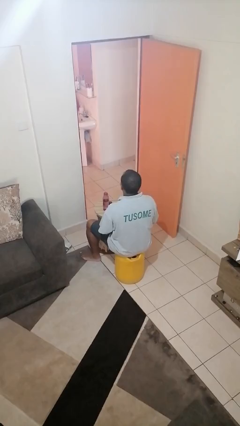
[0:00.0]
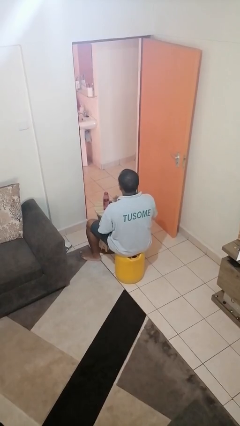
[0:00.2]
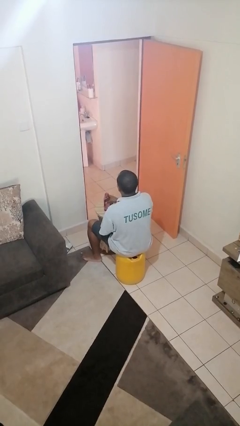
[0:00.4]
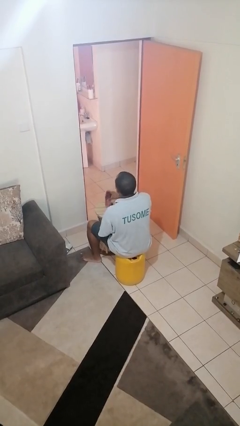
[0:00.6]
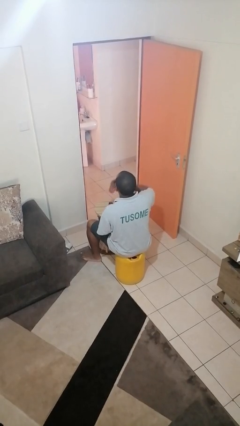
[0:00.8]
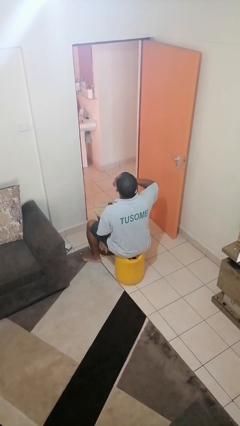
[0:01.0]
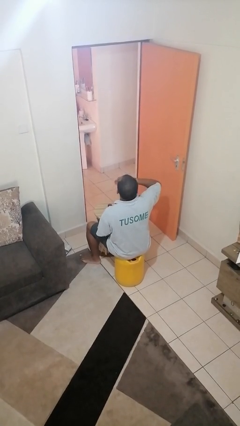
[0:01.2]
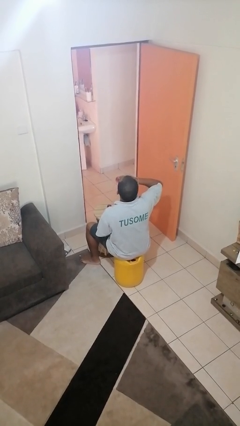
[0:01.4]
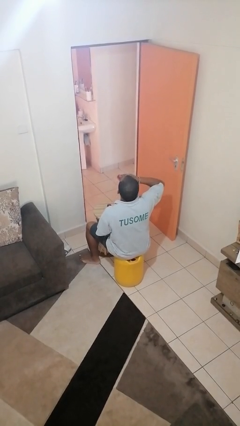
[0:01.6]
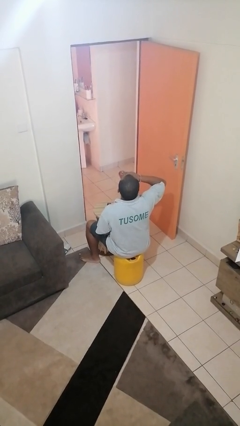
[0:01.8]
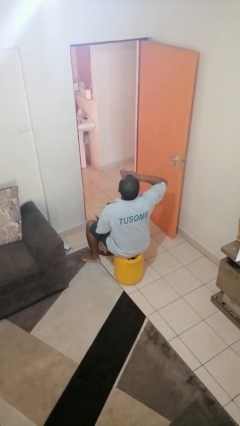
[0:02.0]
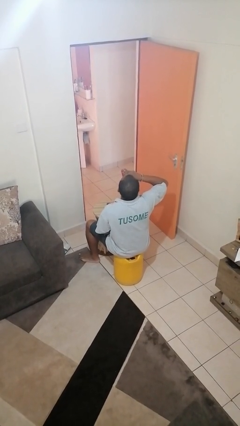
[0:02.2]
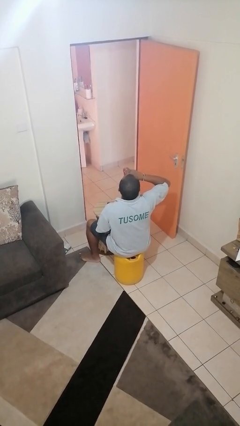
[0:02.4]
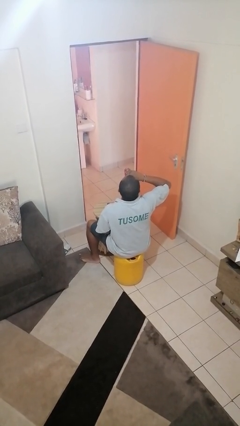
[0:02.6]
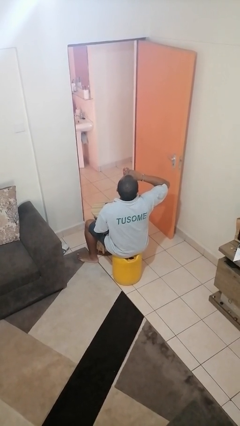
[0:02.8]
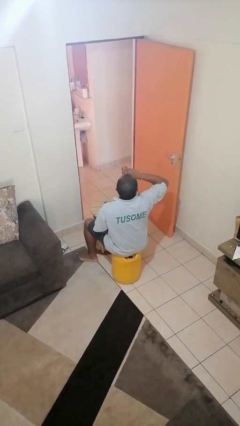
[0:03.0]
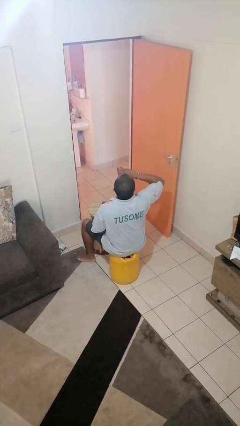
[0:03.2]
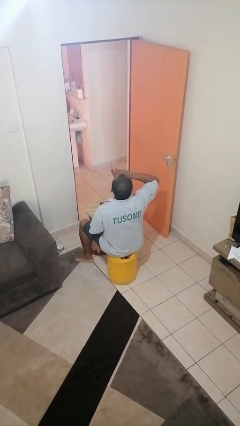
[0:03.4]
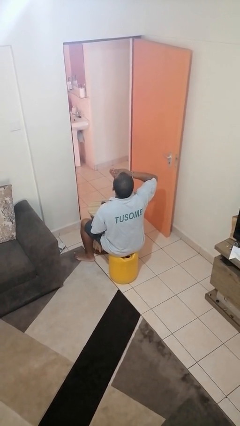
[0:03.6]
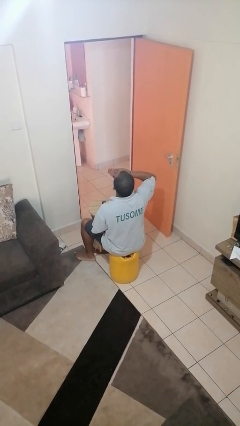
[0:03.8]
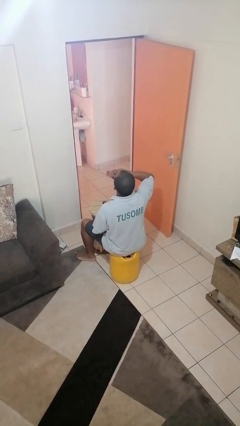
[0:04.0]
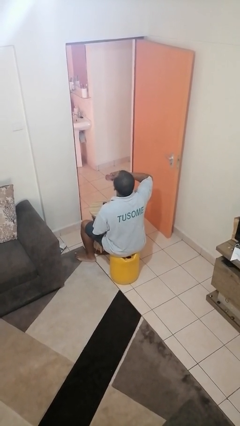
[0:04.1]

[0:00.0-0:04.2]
person drinks from bottle

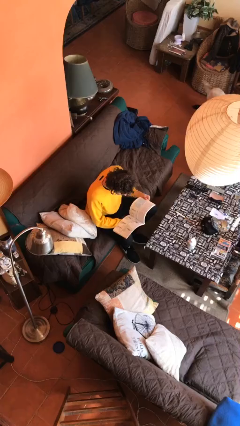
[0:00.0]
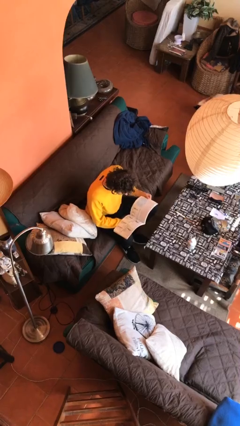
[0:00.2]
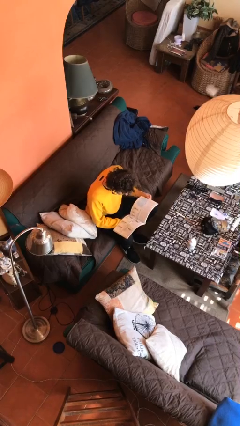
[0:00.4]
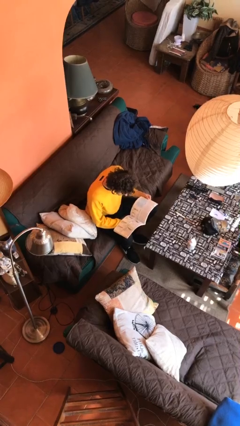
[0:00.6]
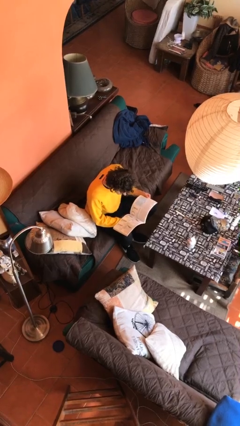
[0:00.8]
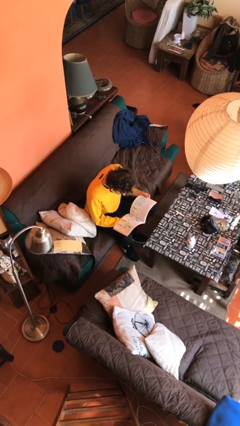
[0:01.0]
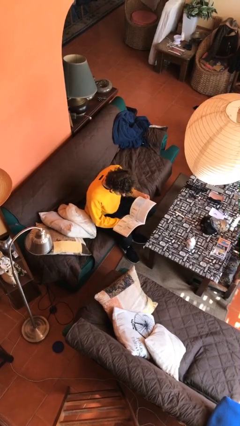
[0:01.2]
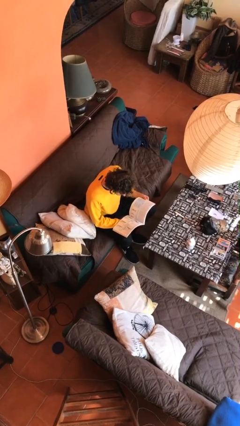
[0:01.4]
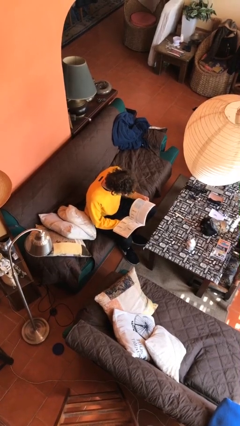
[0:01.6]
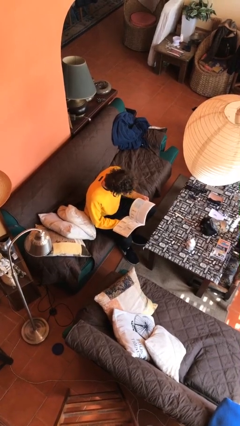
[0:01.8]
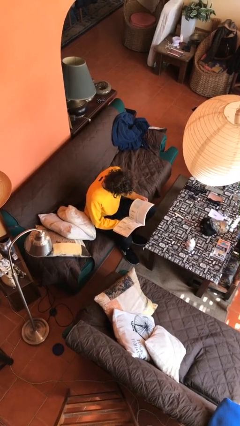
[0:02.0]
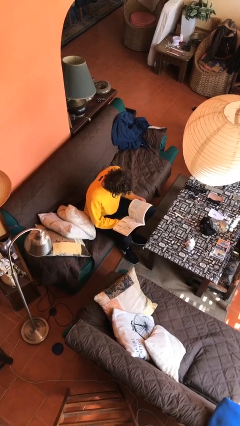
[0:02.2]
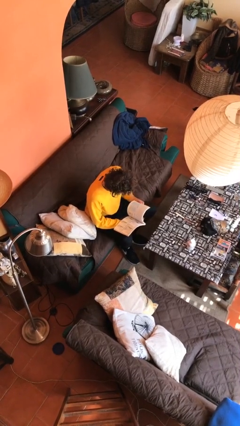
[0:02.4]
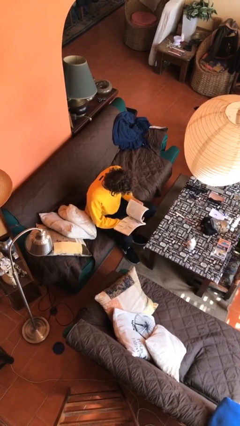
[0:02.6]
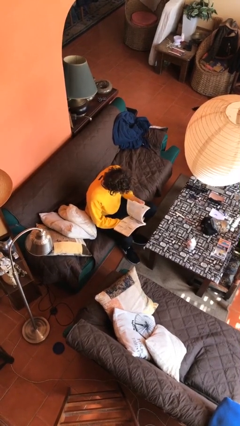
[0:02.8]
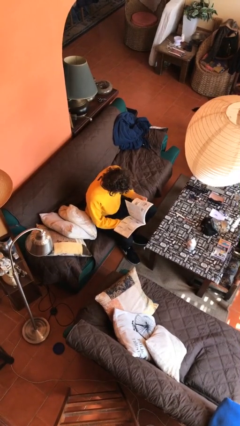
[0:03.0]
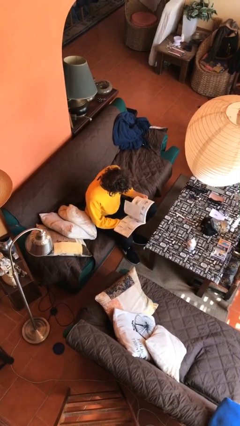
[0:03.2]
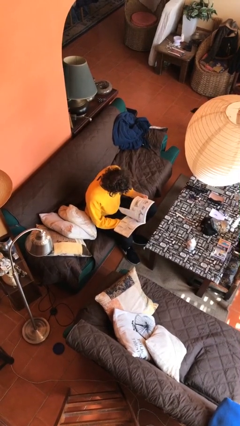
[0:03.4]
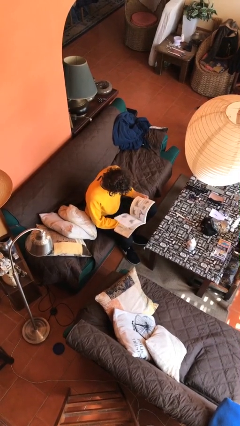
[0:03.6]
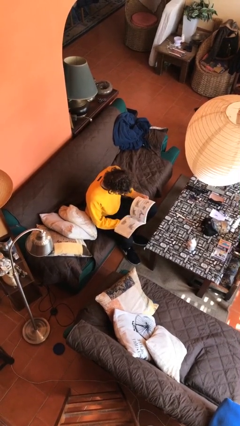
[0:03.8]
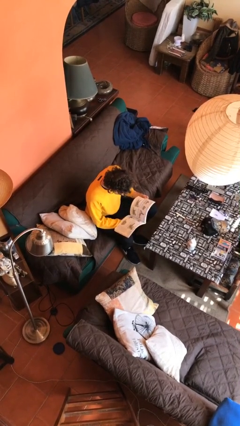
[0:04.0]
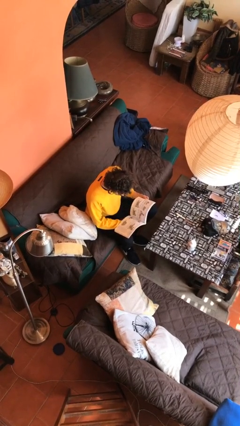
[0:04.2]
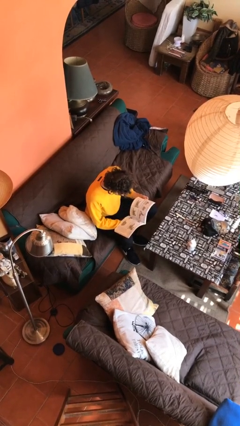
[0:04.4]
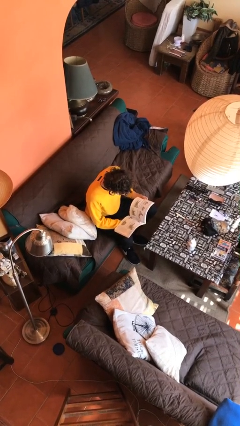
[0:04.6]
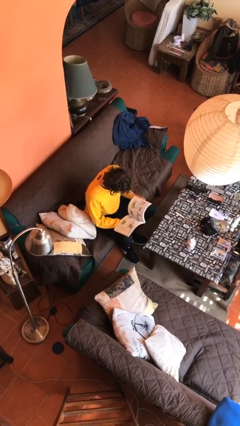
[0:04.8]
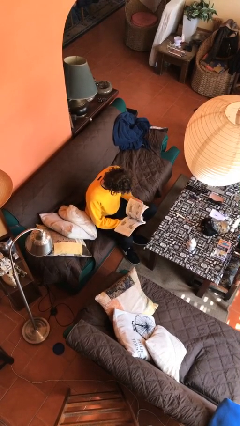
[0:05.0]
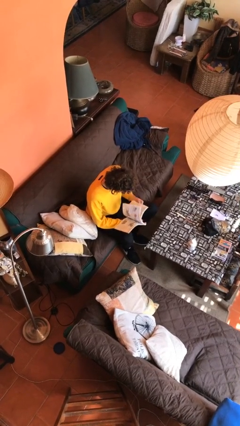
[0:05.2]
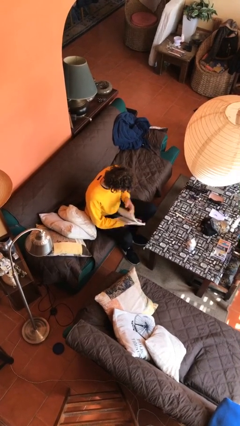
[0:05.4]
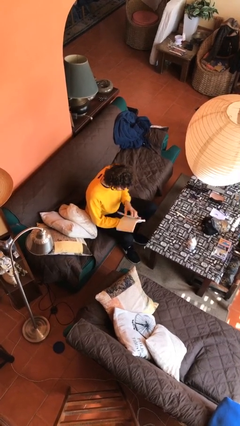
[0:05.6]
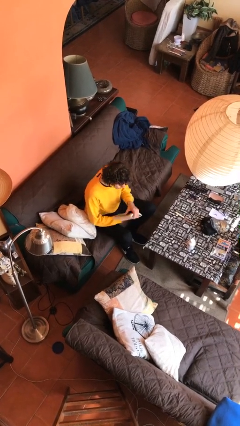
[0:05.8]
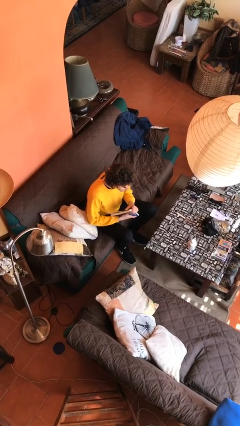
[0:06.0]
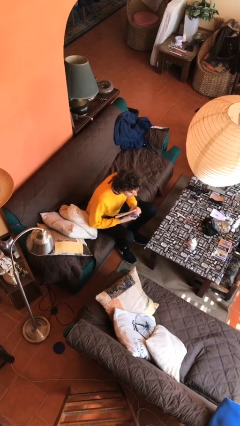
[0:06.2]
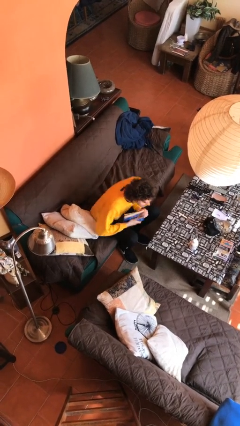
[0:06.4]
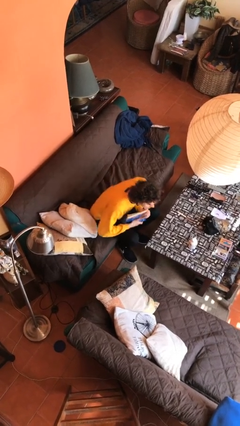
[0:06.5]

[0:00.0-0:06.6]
person reads document

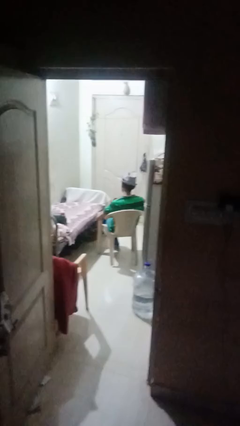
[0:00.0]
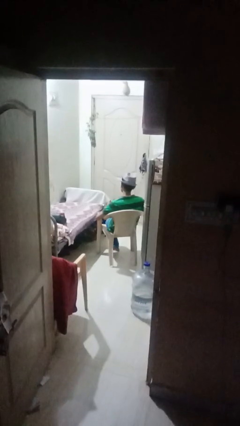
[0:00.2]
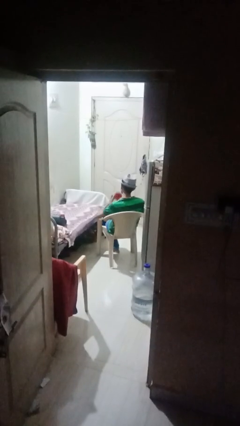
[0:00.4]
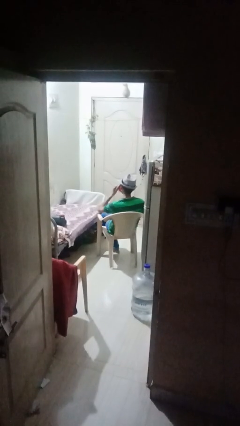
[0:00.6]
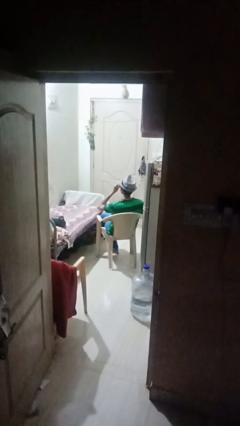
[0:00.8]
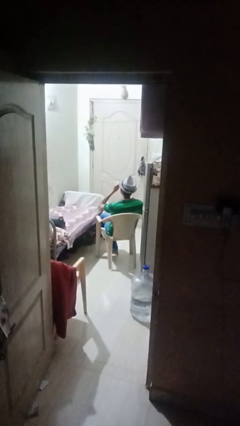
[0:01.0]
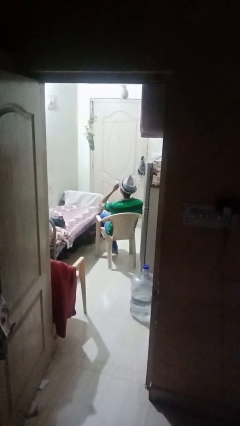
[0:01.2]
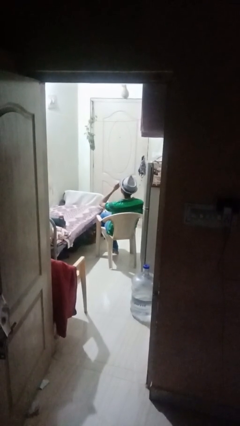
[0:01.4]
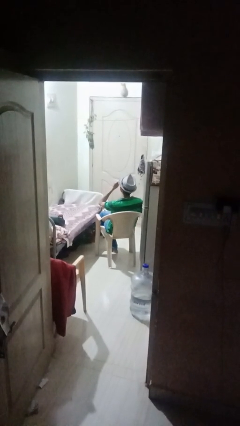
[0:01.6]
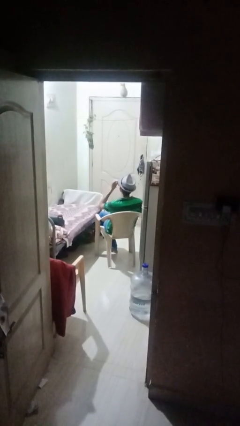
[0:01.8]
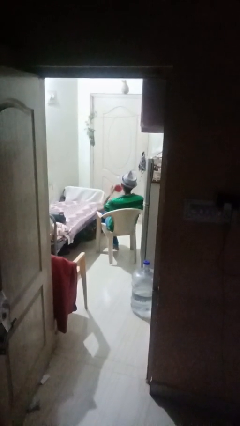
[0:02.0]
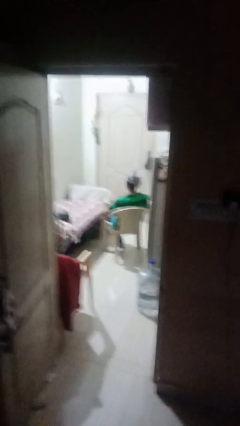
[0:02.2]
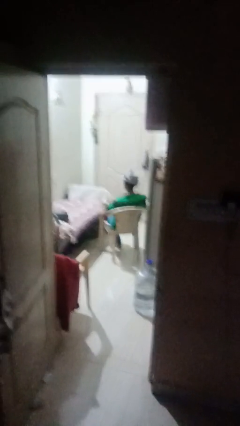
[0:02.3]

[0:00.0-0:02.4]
person drinks from mug

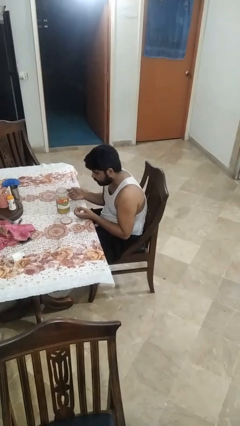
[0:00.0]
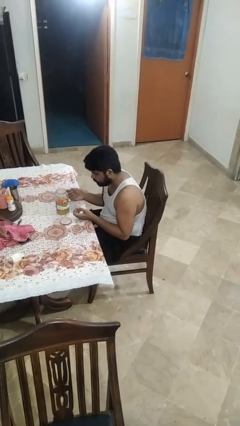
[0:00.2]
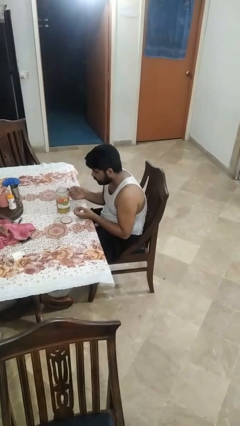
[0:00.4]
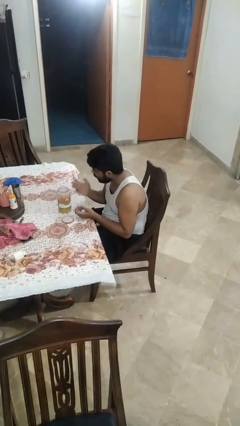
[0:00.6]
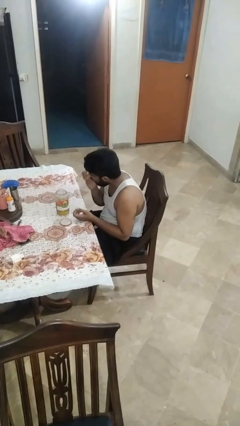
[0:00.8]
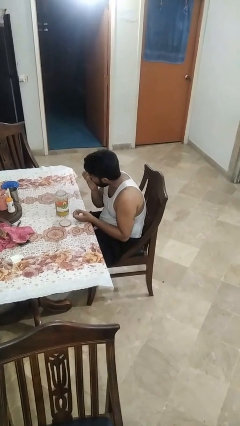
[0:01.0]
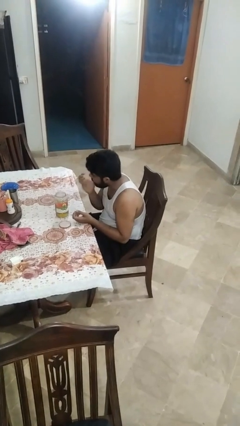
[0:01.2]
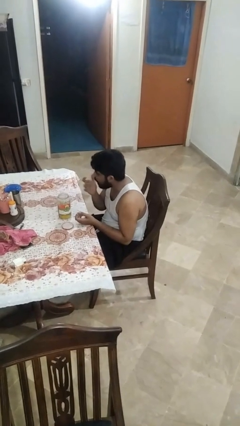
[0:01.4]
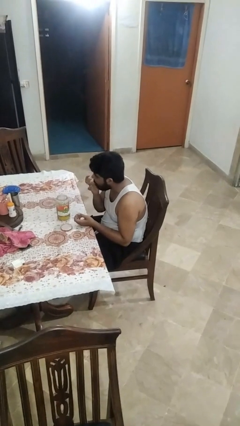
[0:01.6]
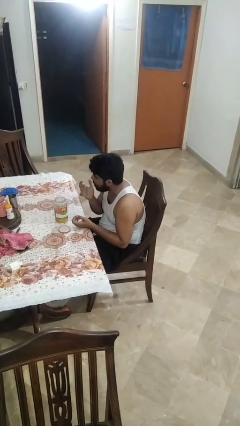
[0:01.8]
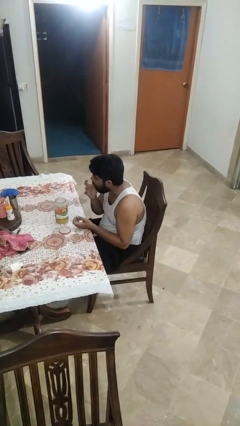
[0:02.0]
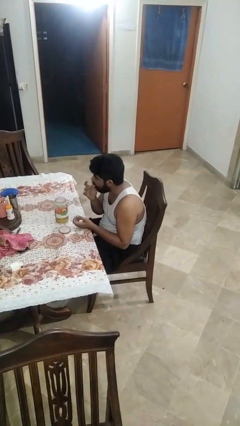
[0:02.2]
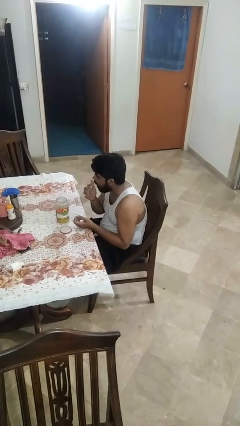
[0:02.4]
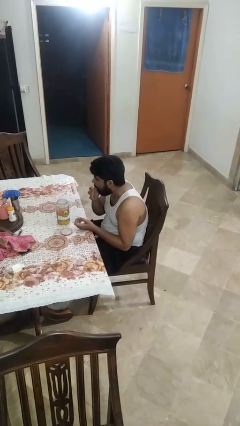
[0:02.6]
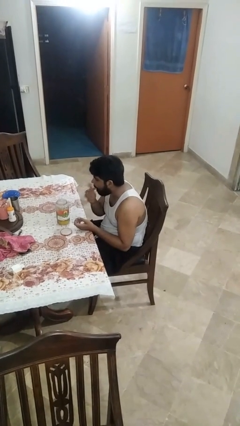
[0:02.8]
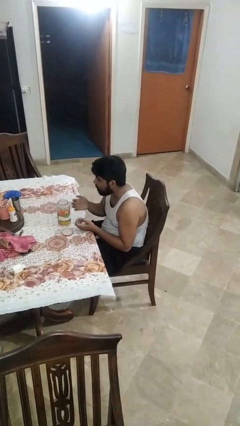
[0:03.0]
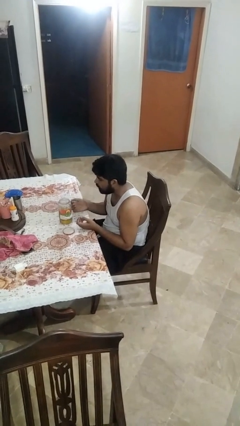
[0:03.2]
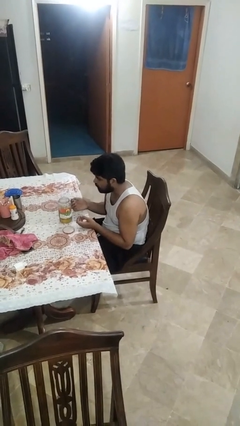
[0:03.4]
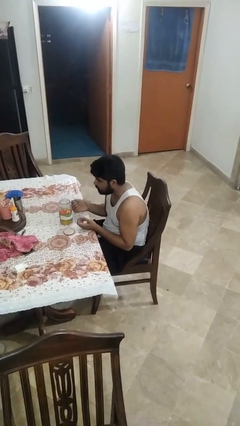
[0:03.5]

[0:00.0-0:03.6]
person licks fingers

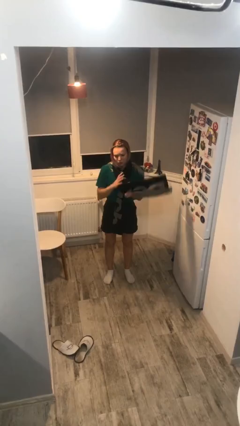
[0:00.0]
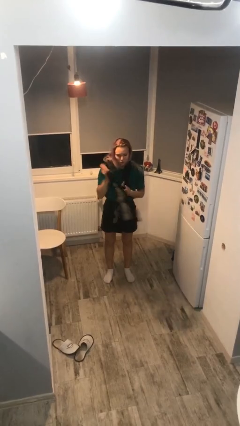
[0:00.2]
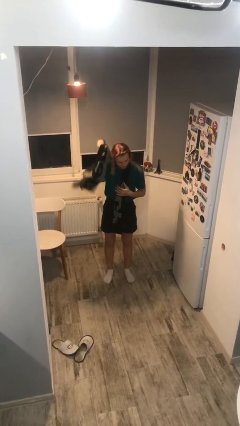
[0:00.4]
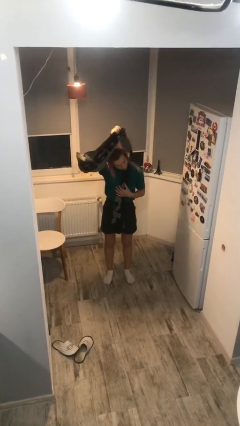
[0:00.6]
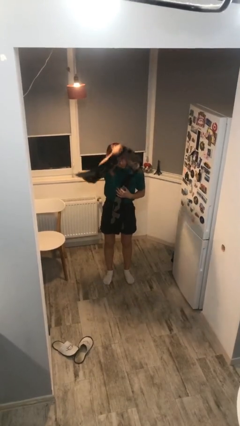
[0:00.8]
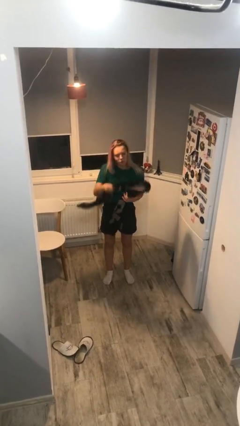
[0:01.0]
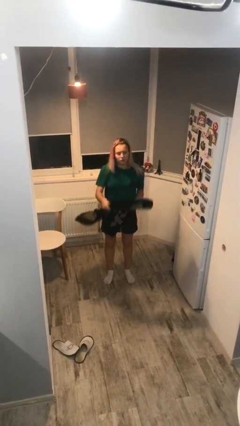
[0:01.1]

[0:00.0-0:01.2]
person takes off scarf
